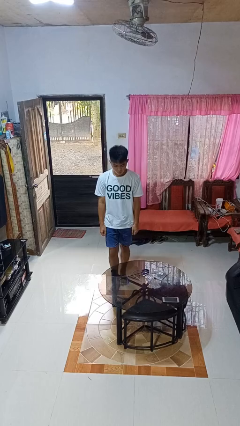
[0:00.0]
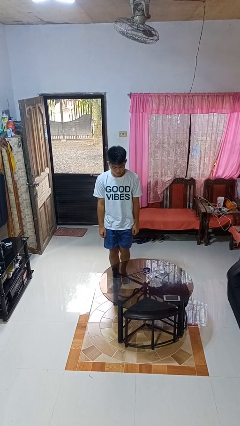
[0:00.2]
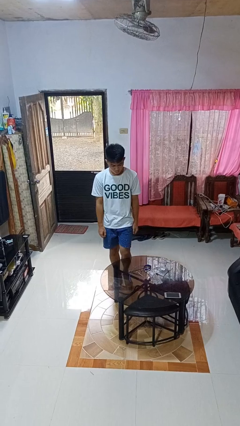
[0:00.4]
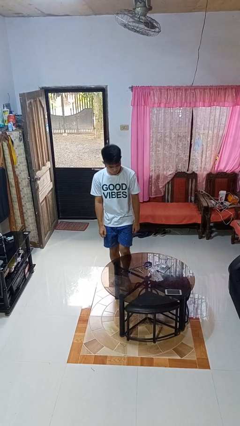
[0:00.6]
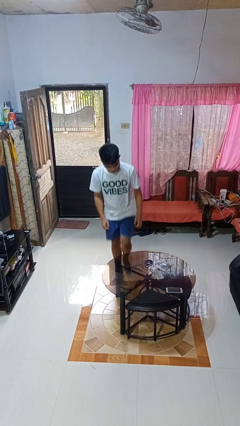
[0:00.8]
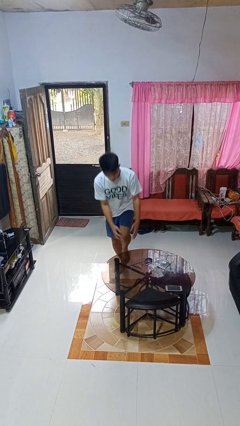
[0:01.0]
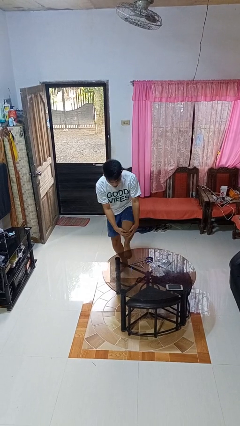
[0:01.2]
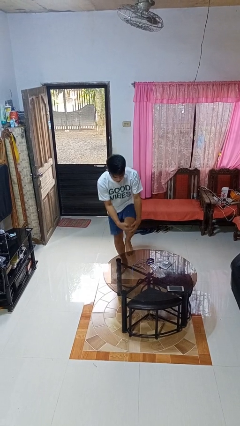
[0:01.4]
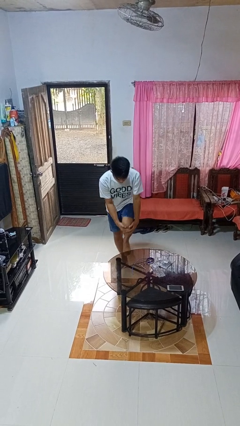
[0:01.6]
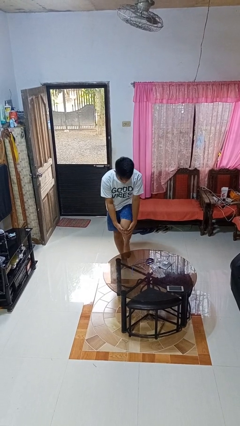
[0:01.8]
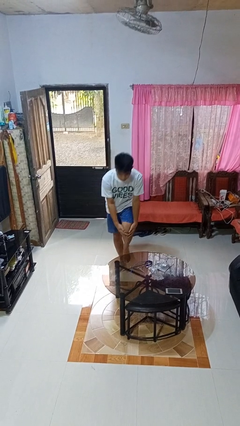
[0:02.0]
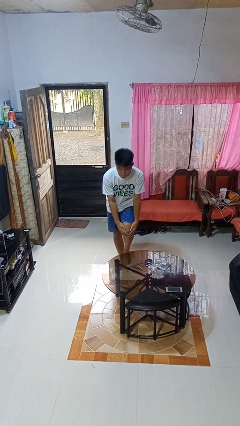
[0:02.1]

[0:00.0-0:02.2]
person bumps into table

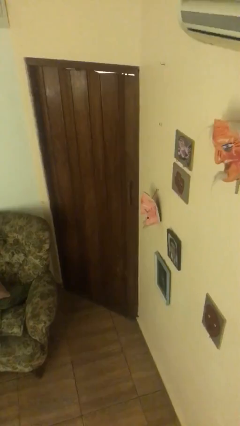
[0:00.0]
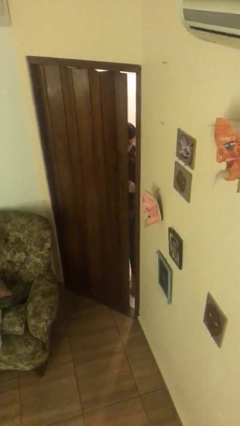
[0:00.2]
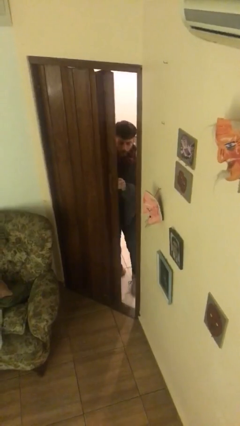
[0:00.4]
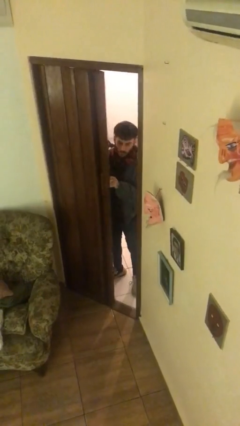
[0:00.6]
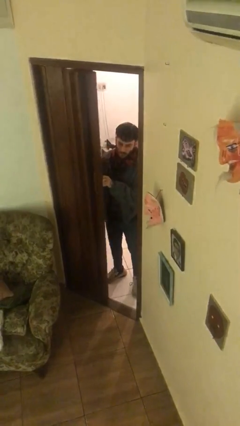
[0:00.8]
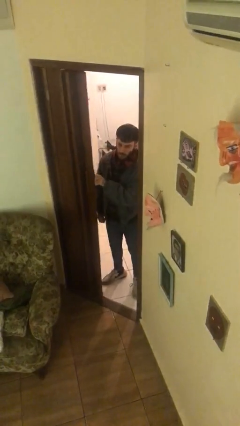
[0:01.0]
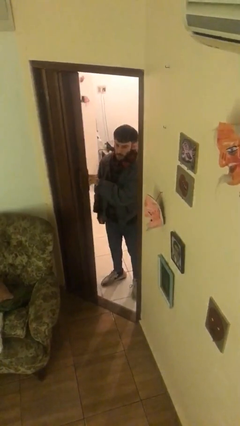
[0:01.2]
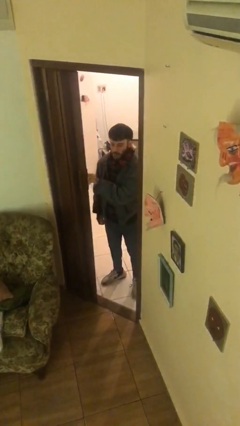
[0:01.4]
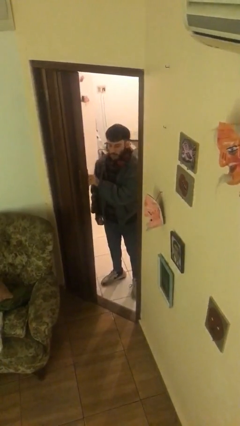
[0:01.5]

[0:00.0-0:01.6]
person opens sliding door

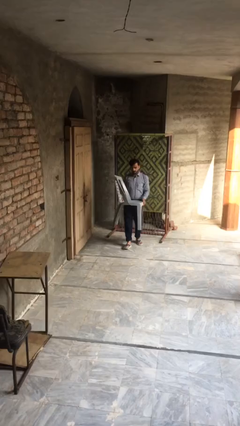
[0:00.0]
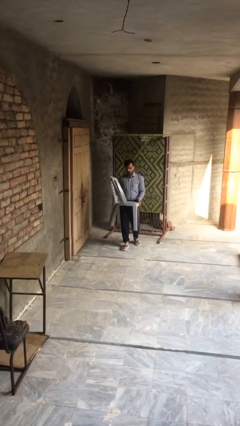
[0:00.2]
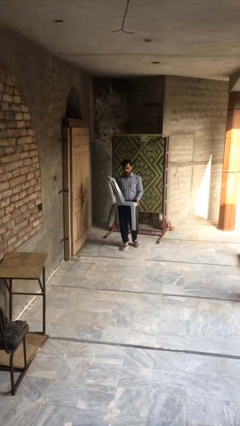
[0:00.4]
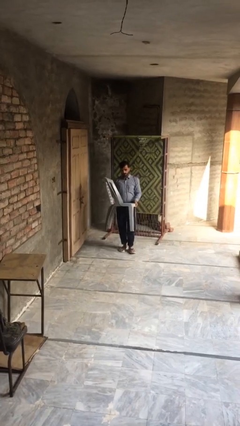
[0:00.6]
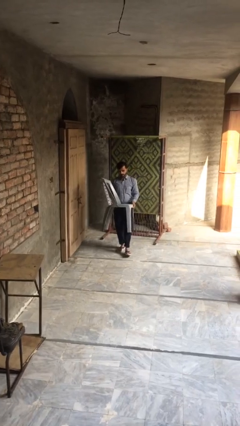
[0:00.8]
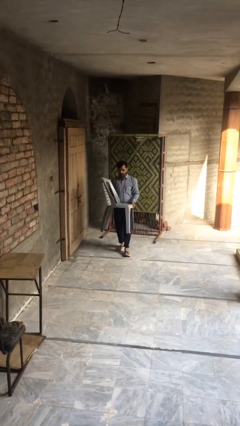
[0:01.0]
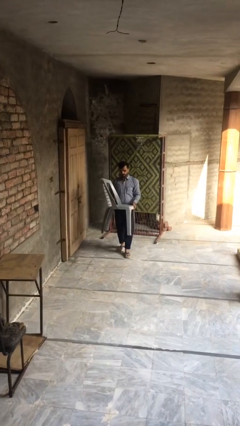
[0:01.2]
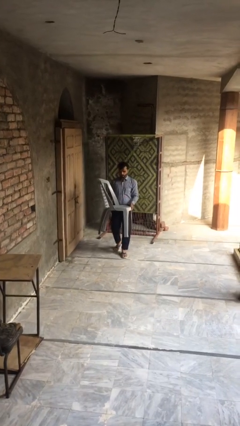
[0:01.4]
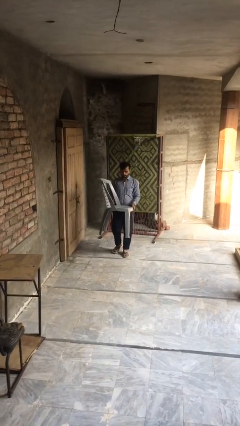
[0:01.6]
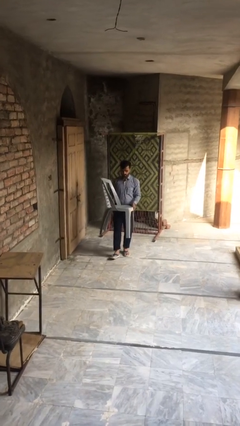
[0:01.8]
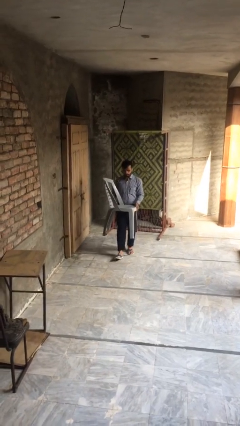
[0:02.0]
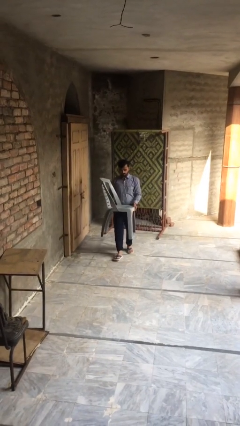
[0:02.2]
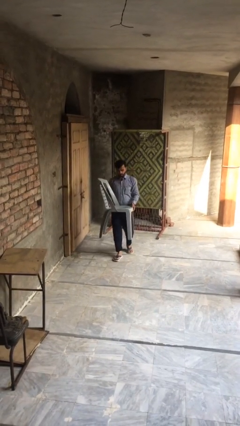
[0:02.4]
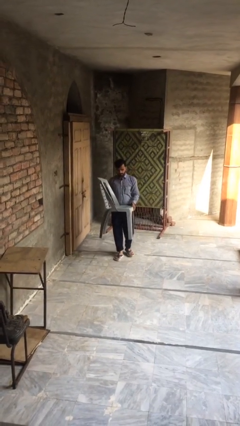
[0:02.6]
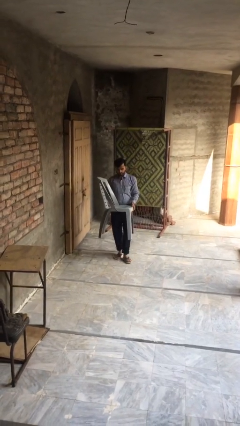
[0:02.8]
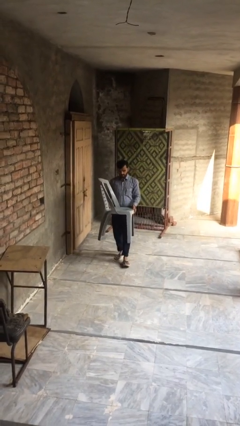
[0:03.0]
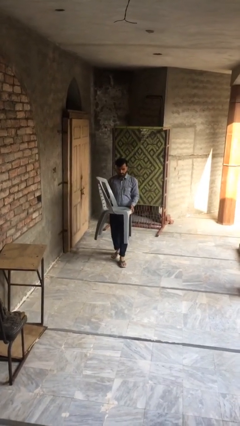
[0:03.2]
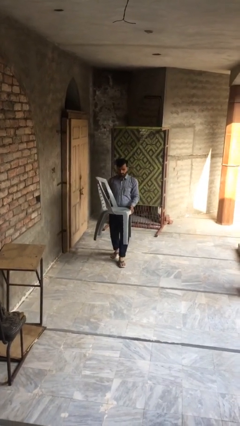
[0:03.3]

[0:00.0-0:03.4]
person carries heavy object

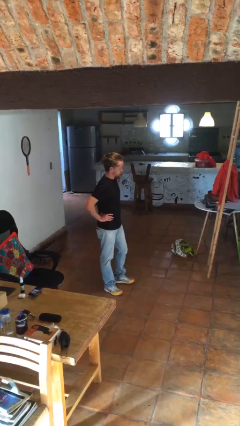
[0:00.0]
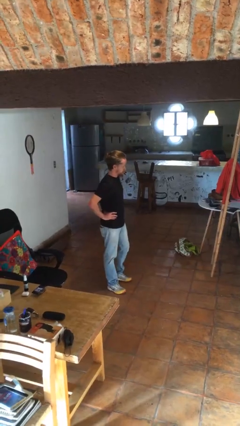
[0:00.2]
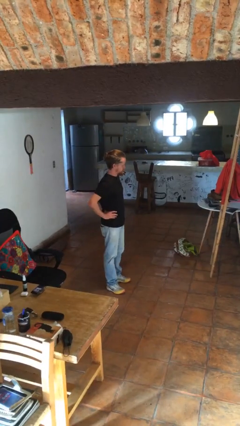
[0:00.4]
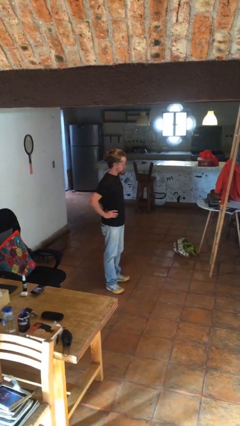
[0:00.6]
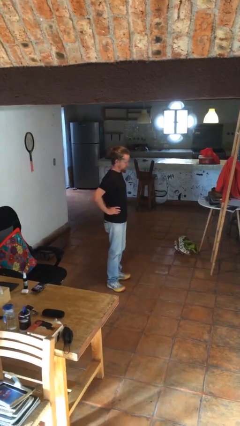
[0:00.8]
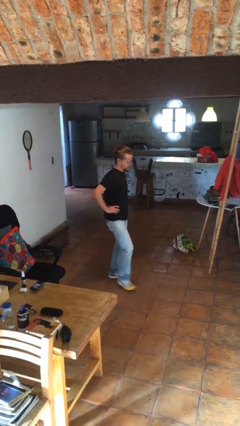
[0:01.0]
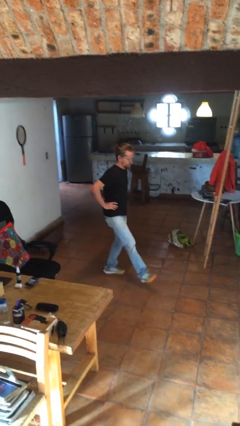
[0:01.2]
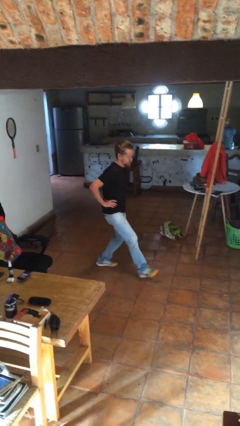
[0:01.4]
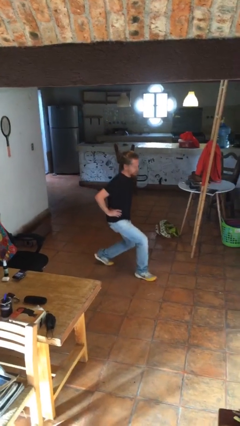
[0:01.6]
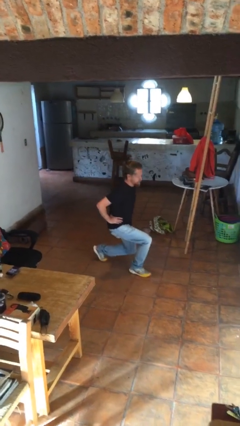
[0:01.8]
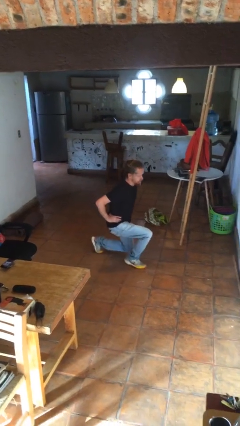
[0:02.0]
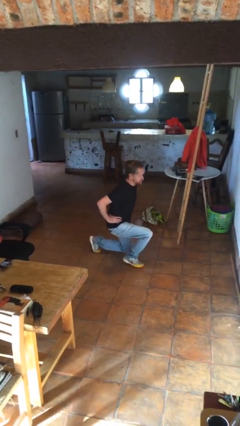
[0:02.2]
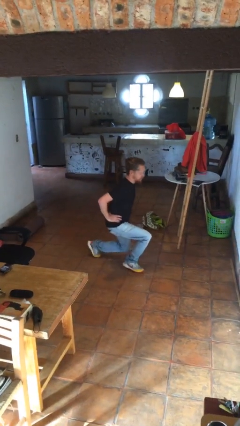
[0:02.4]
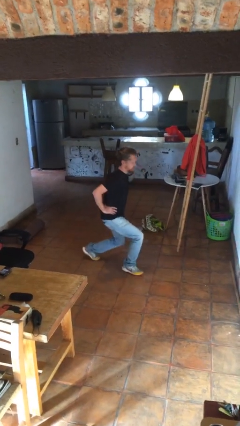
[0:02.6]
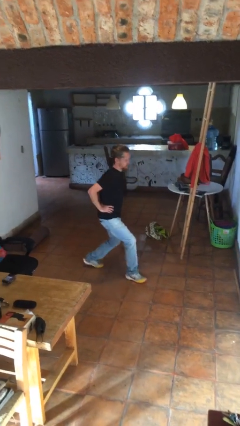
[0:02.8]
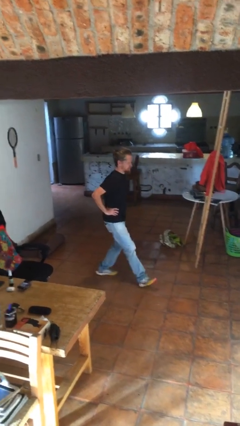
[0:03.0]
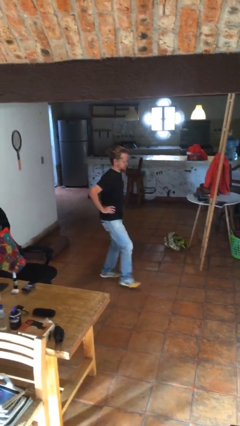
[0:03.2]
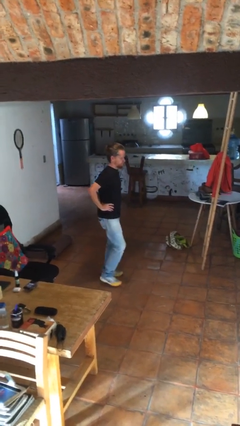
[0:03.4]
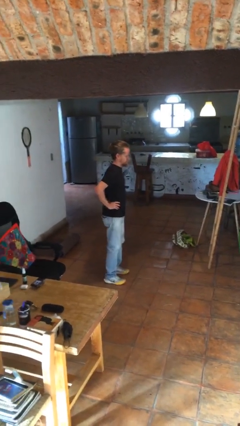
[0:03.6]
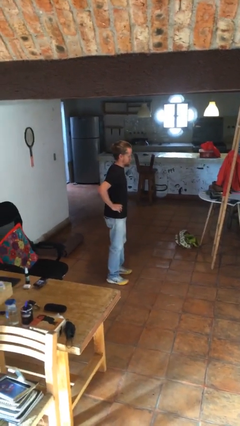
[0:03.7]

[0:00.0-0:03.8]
person exercises with lunges

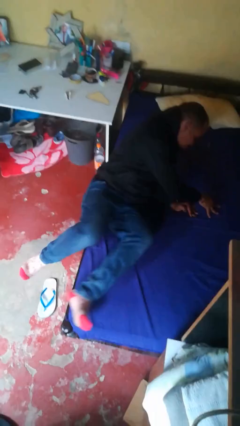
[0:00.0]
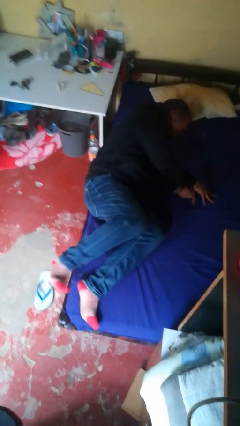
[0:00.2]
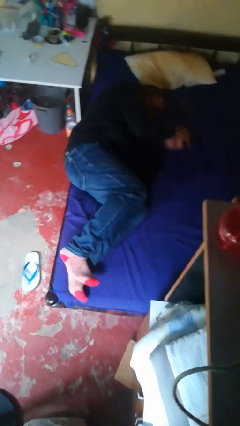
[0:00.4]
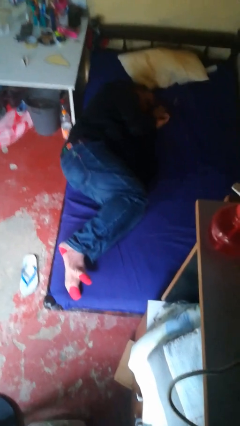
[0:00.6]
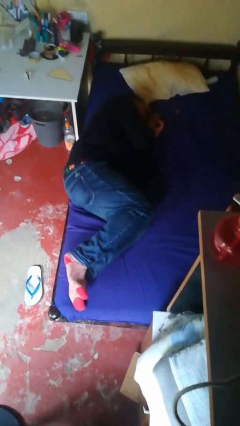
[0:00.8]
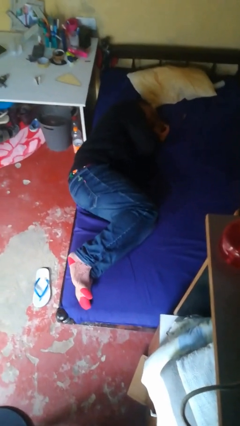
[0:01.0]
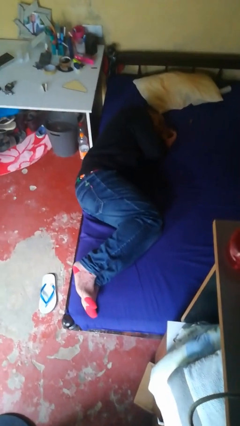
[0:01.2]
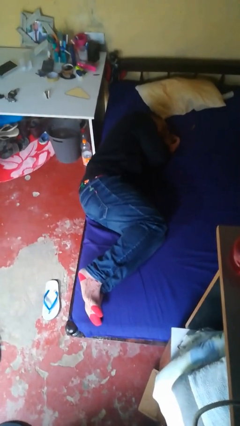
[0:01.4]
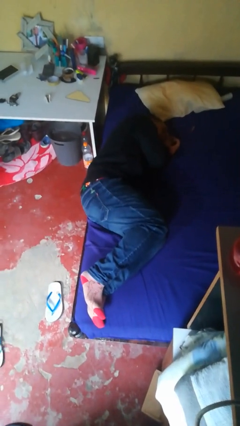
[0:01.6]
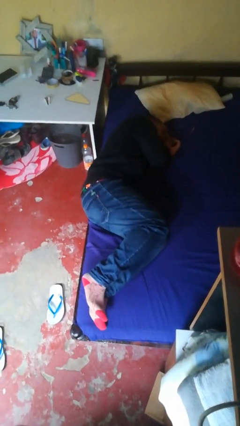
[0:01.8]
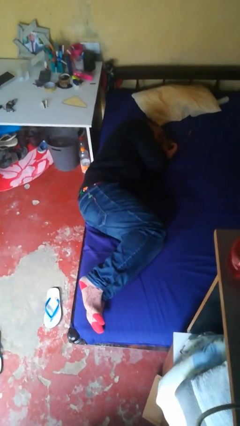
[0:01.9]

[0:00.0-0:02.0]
person lies down on bed

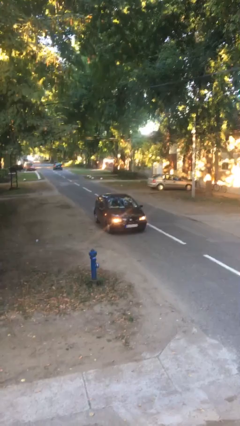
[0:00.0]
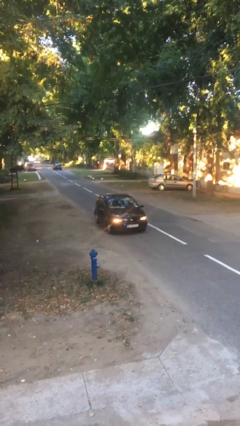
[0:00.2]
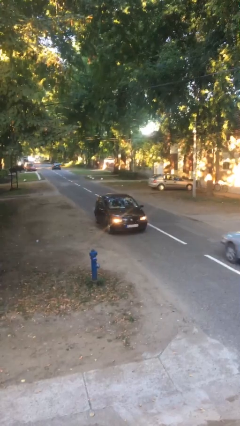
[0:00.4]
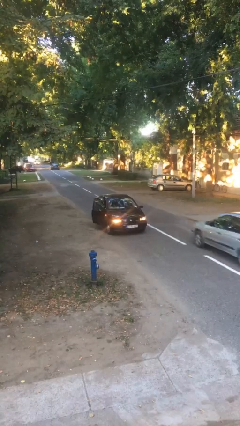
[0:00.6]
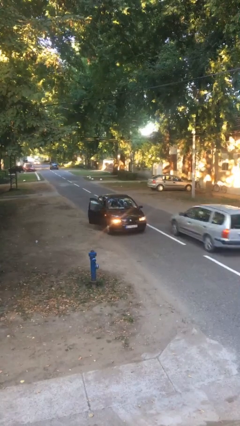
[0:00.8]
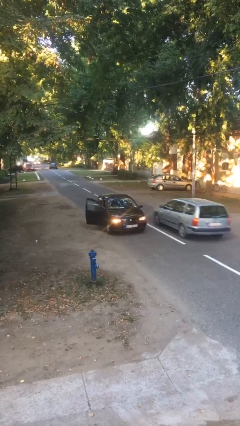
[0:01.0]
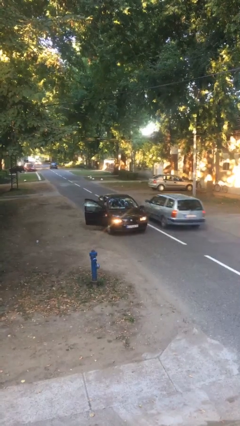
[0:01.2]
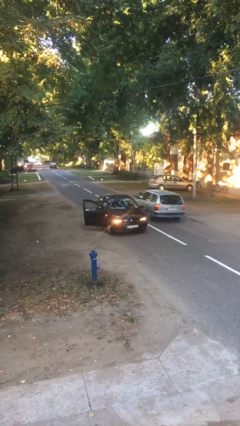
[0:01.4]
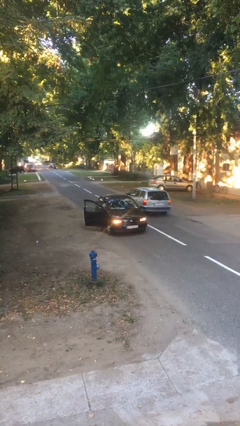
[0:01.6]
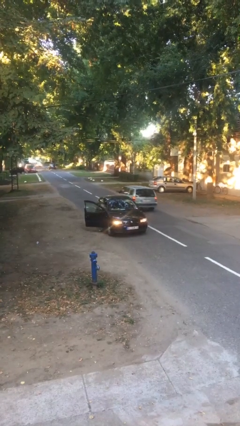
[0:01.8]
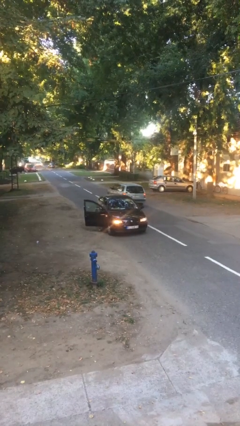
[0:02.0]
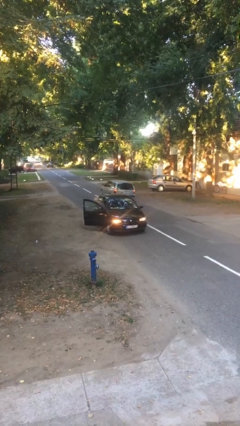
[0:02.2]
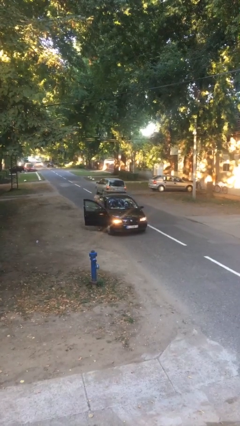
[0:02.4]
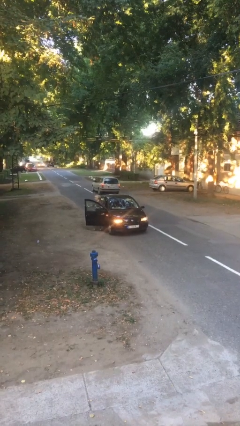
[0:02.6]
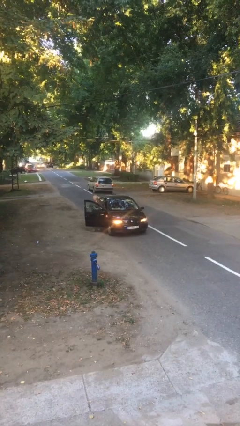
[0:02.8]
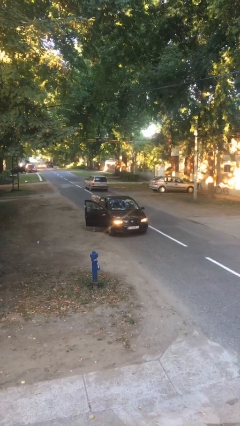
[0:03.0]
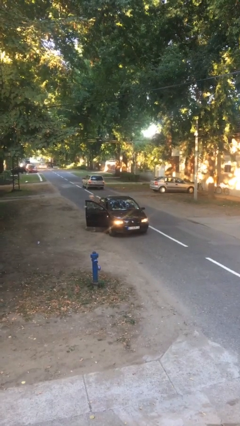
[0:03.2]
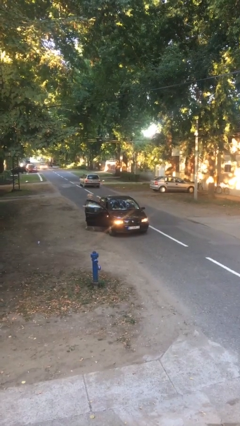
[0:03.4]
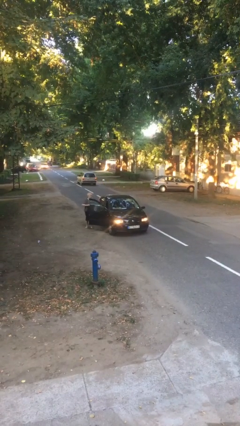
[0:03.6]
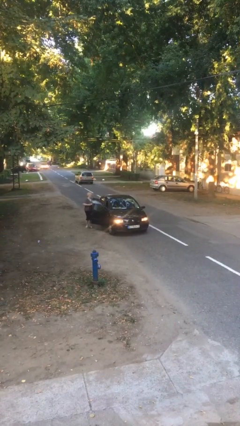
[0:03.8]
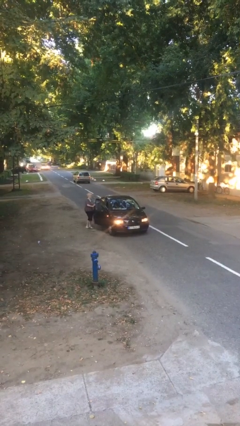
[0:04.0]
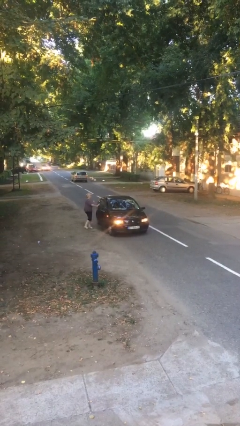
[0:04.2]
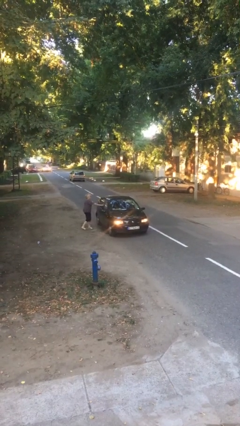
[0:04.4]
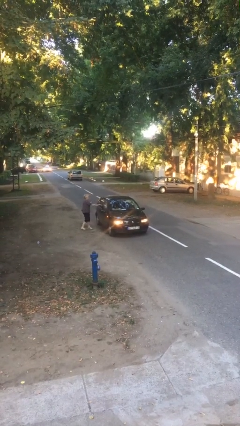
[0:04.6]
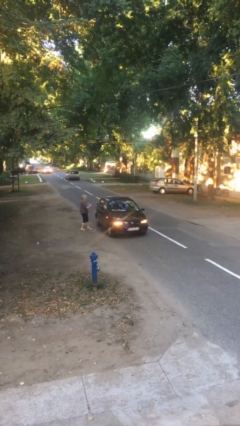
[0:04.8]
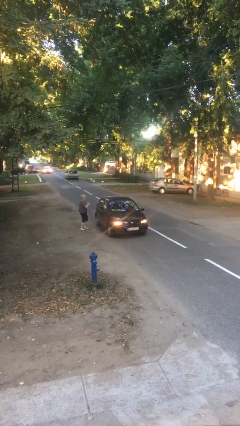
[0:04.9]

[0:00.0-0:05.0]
car drops off person
